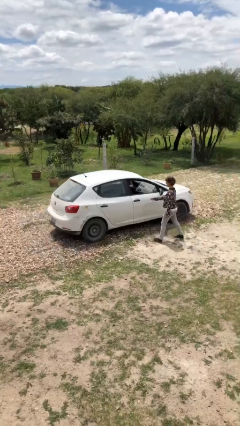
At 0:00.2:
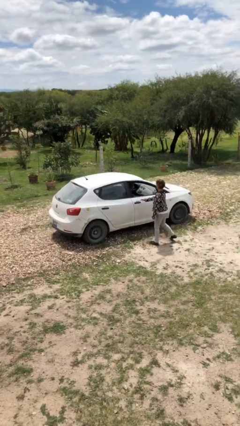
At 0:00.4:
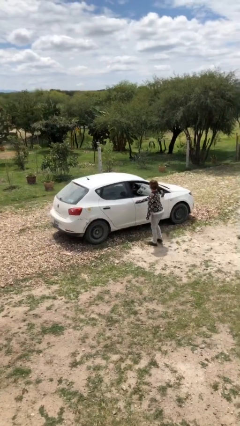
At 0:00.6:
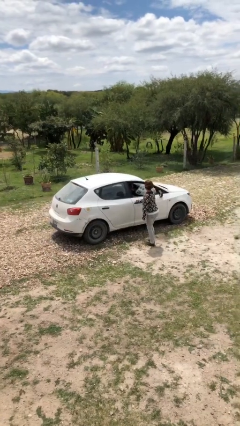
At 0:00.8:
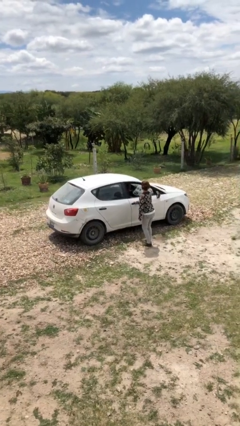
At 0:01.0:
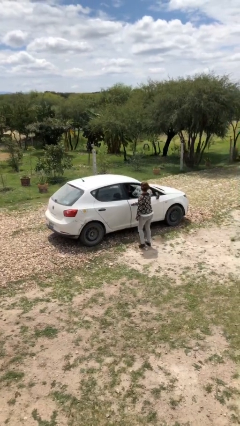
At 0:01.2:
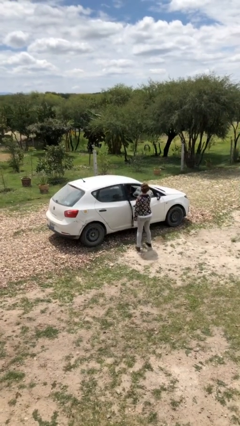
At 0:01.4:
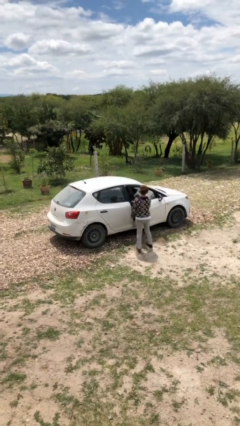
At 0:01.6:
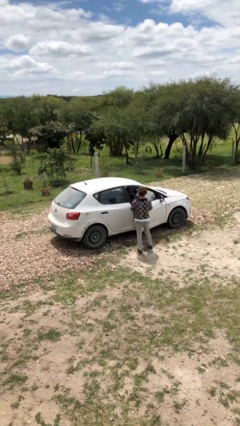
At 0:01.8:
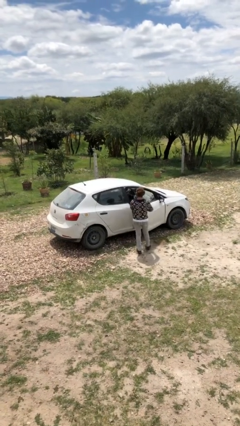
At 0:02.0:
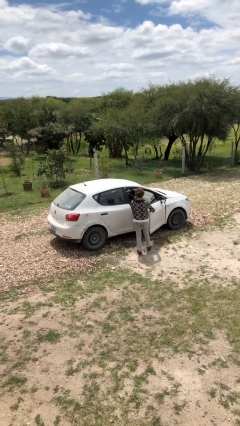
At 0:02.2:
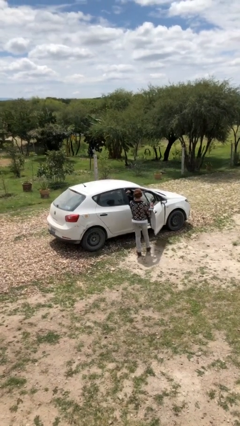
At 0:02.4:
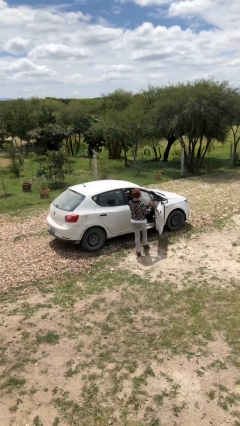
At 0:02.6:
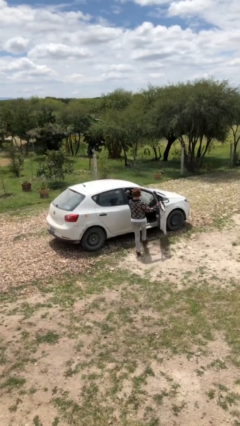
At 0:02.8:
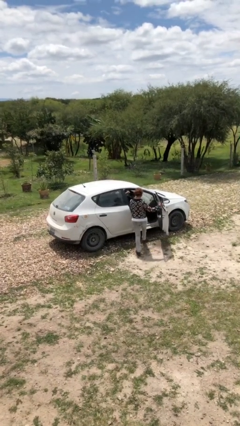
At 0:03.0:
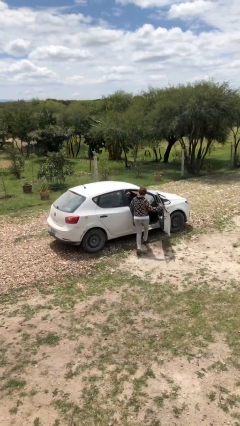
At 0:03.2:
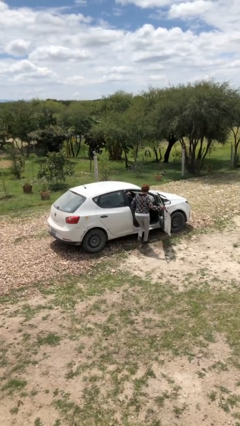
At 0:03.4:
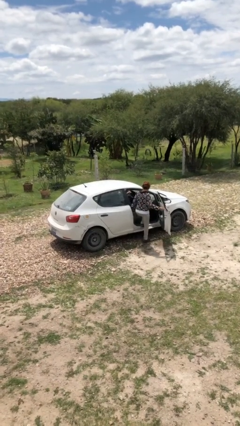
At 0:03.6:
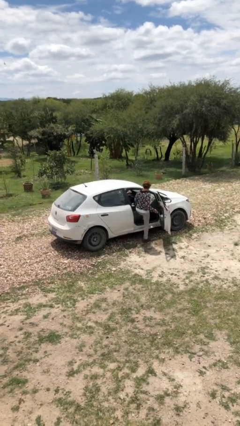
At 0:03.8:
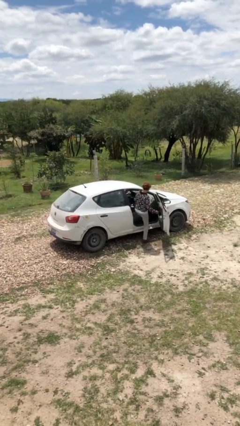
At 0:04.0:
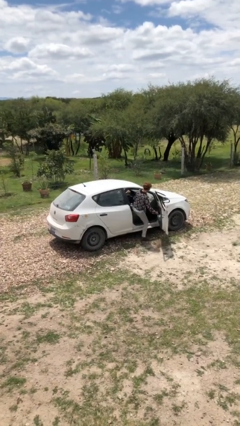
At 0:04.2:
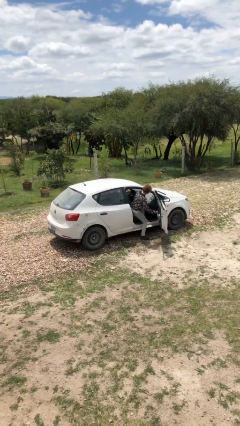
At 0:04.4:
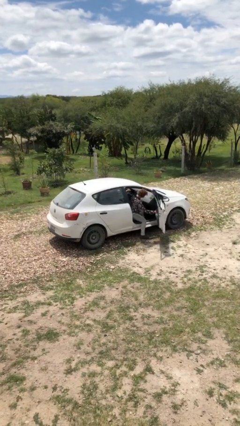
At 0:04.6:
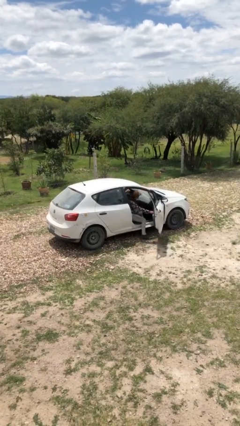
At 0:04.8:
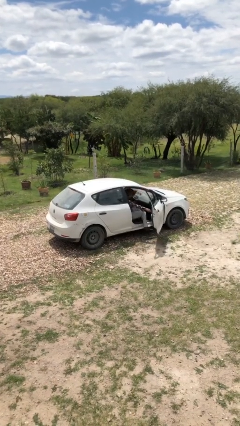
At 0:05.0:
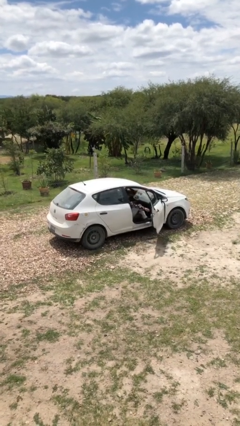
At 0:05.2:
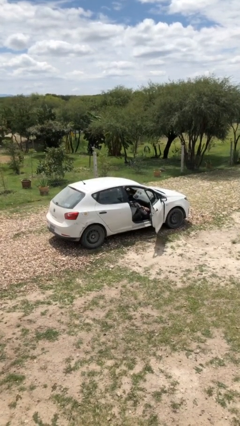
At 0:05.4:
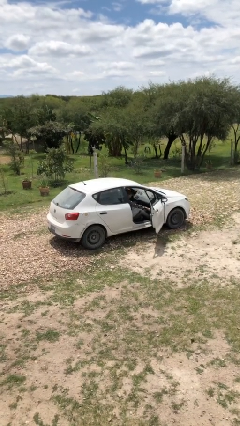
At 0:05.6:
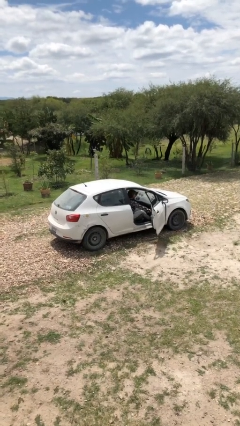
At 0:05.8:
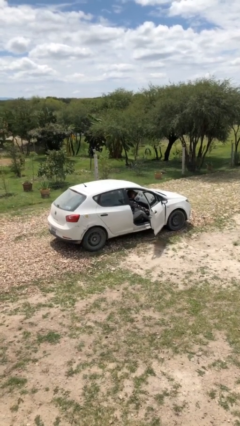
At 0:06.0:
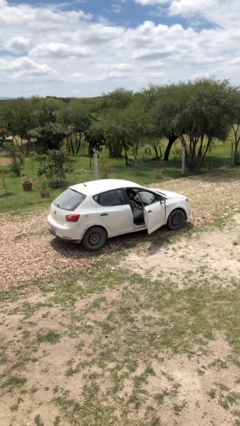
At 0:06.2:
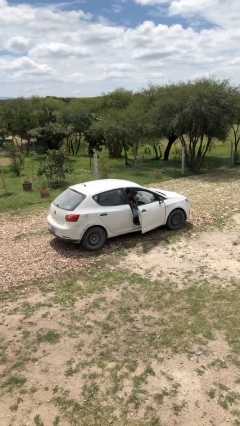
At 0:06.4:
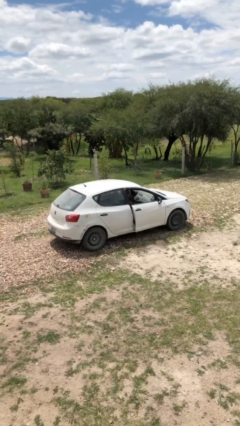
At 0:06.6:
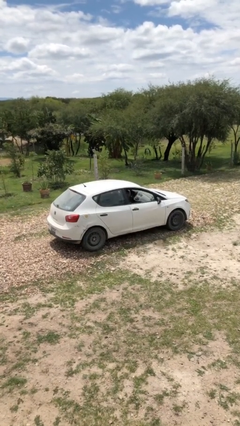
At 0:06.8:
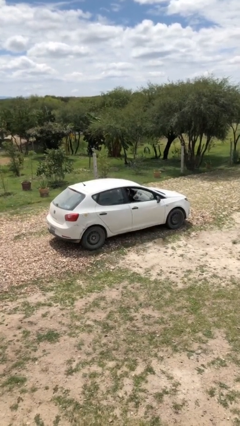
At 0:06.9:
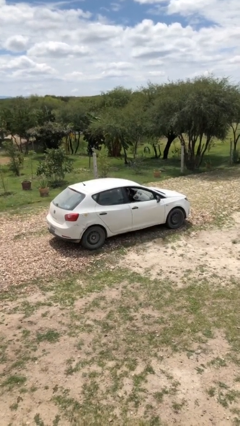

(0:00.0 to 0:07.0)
car picks up person

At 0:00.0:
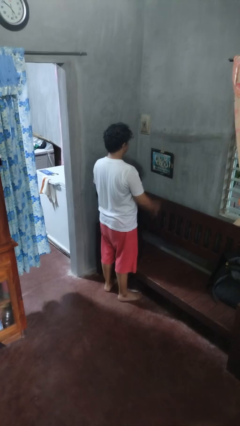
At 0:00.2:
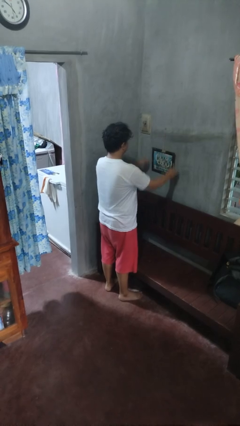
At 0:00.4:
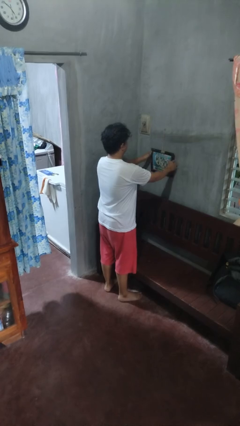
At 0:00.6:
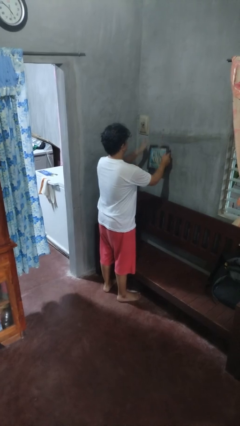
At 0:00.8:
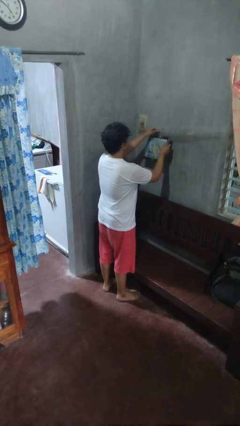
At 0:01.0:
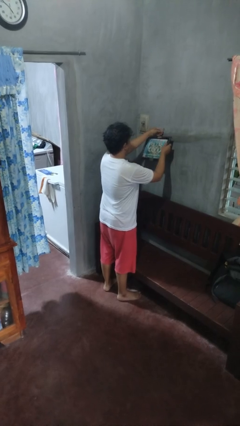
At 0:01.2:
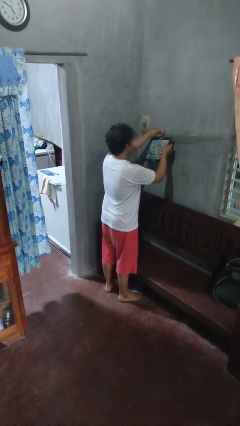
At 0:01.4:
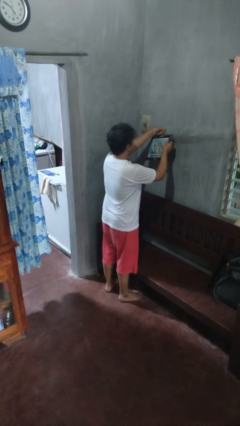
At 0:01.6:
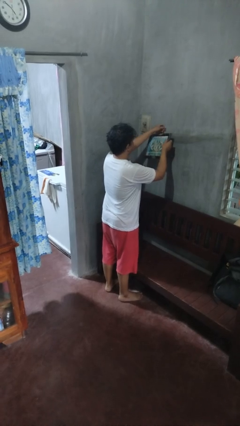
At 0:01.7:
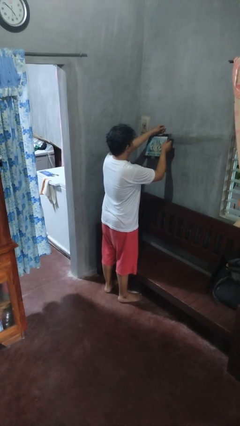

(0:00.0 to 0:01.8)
person takes down picture frame

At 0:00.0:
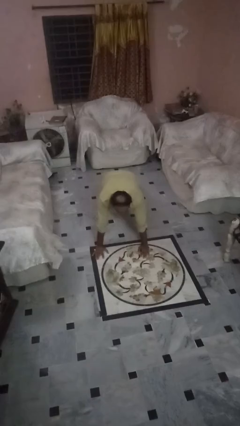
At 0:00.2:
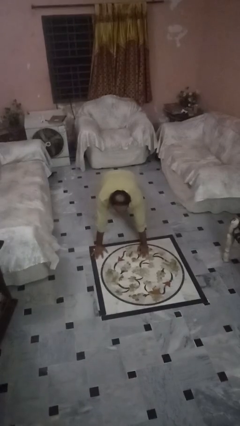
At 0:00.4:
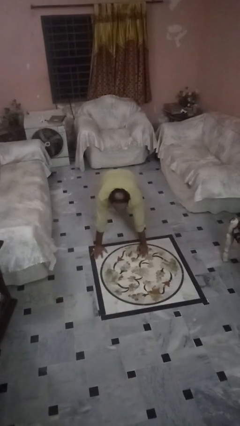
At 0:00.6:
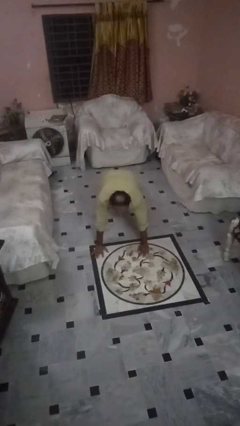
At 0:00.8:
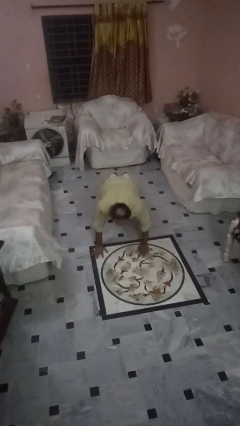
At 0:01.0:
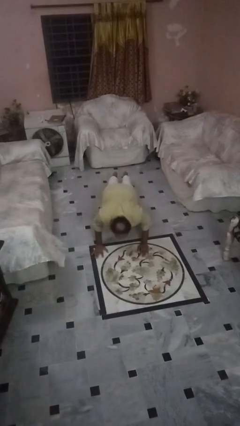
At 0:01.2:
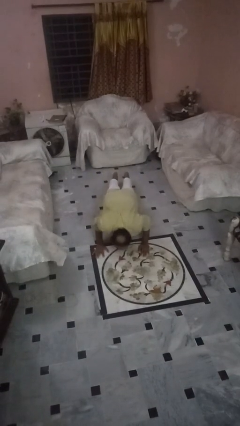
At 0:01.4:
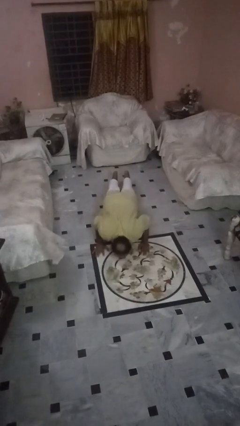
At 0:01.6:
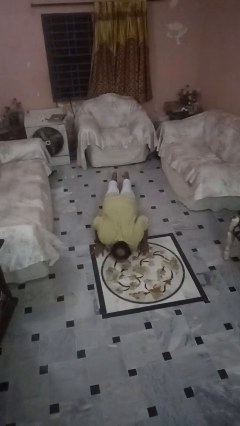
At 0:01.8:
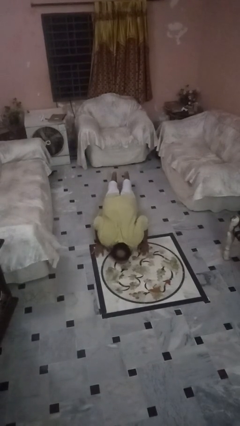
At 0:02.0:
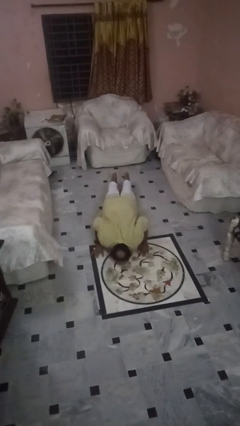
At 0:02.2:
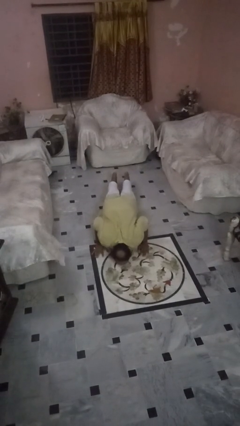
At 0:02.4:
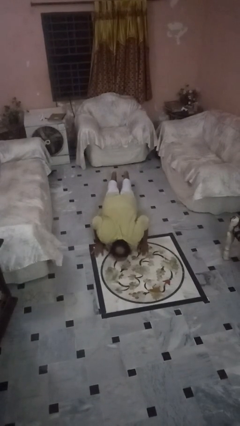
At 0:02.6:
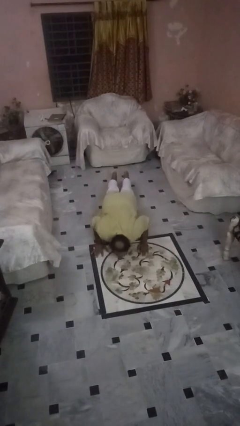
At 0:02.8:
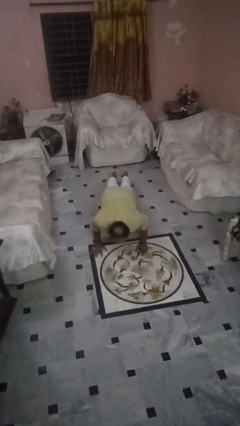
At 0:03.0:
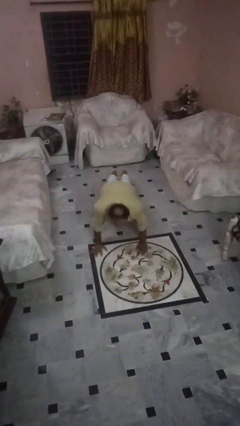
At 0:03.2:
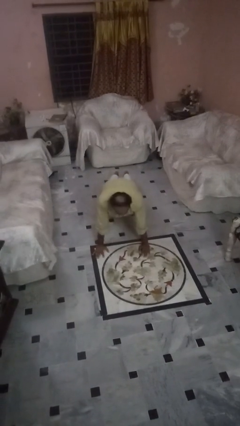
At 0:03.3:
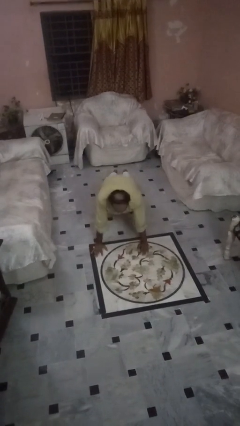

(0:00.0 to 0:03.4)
person exercises with pushup

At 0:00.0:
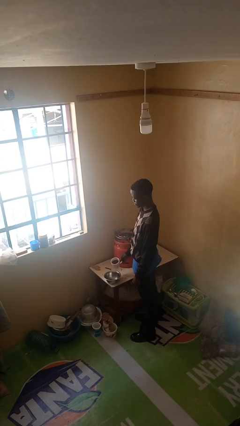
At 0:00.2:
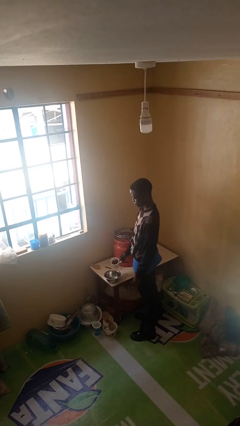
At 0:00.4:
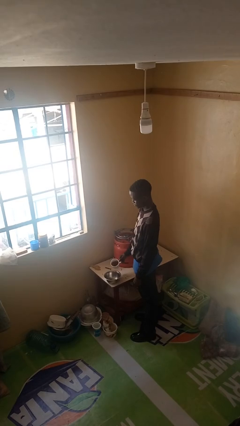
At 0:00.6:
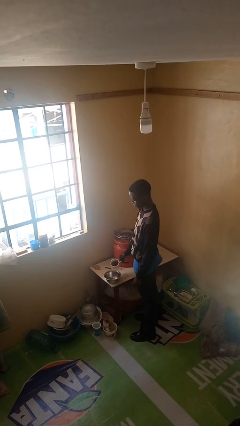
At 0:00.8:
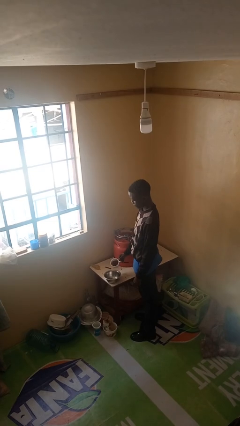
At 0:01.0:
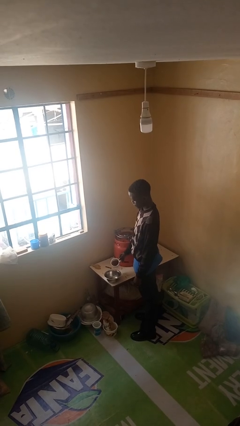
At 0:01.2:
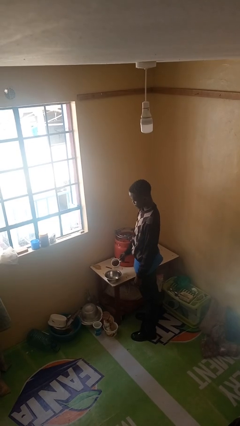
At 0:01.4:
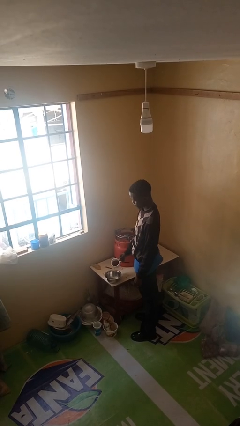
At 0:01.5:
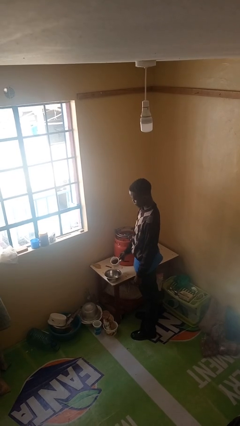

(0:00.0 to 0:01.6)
person pours into bowl

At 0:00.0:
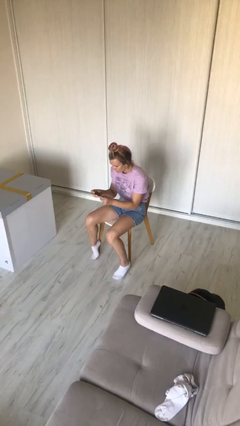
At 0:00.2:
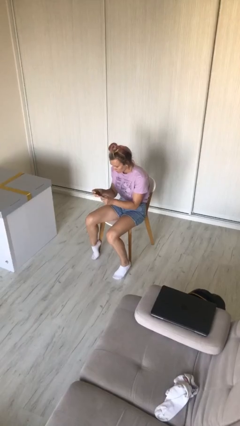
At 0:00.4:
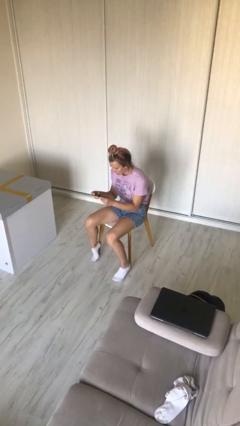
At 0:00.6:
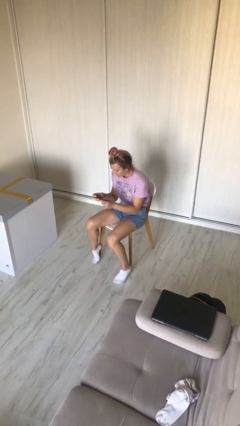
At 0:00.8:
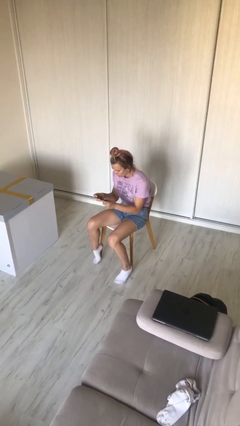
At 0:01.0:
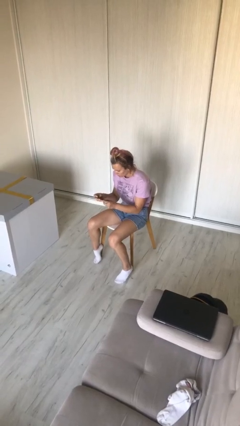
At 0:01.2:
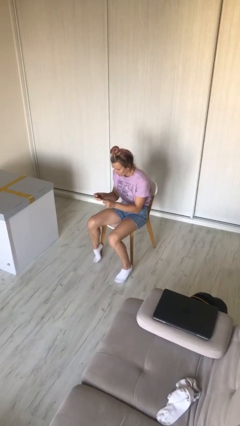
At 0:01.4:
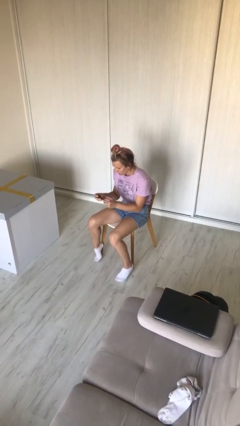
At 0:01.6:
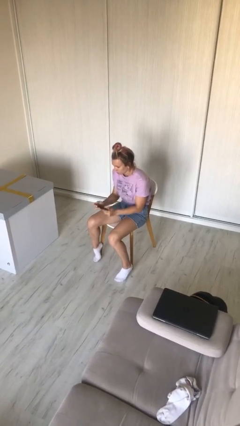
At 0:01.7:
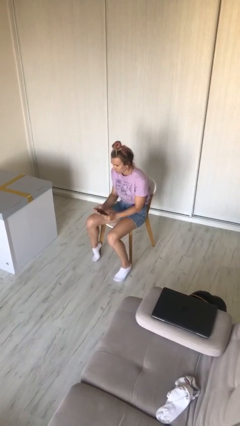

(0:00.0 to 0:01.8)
person interacts with handheld game

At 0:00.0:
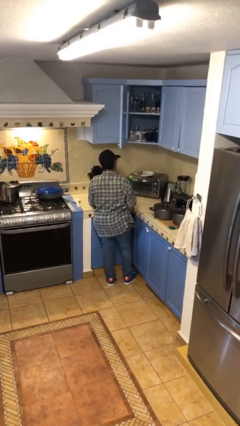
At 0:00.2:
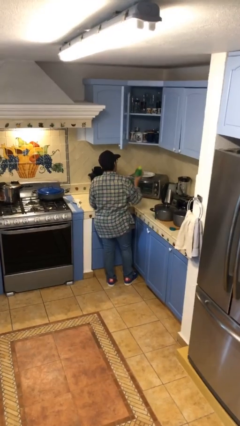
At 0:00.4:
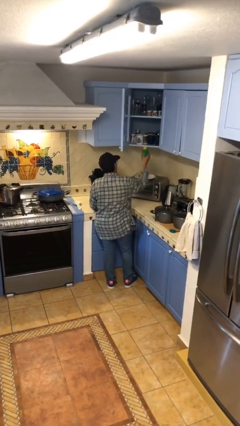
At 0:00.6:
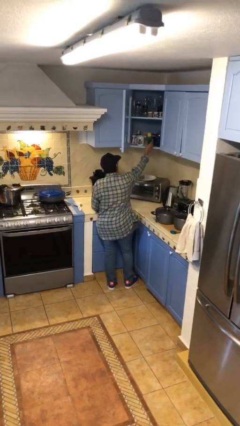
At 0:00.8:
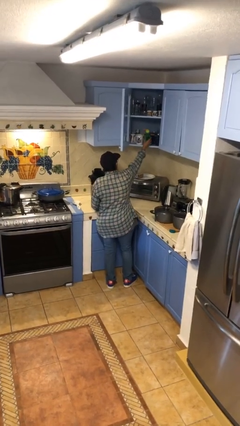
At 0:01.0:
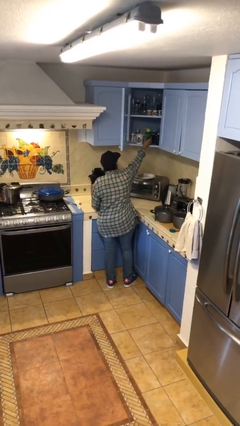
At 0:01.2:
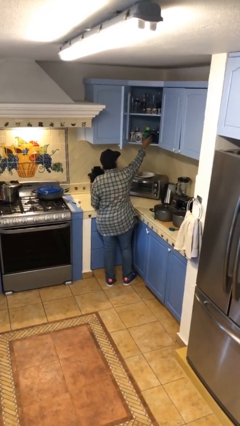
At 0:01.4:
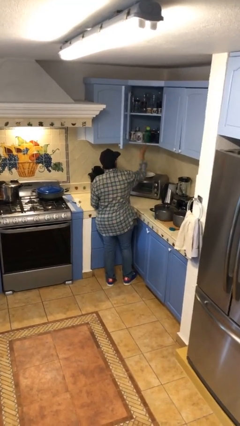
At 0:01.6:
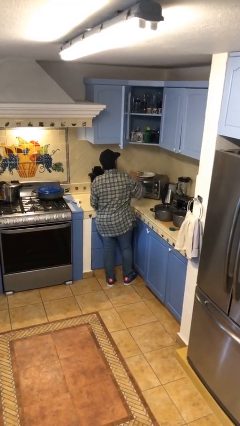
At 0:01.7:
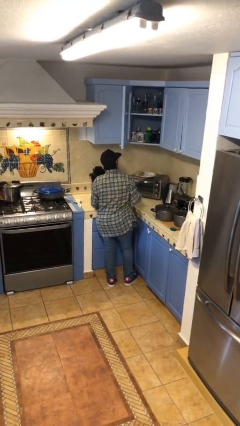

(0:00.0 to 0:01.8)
person puts down object into cabinet
